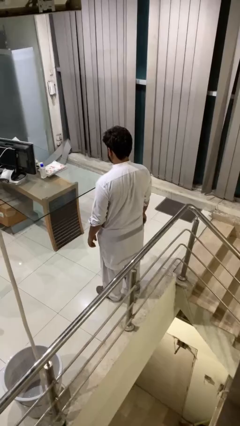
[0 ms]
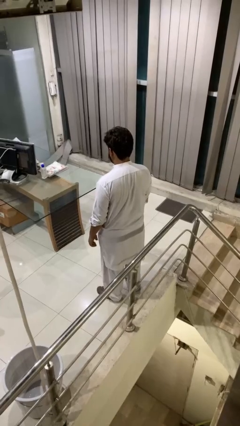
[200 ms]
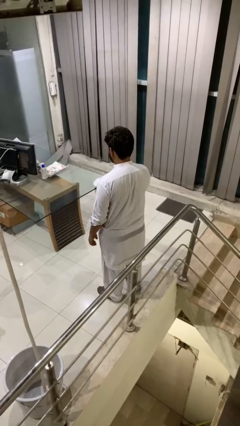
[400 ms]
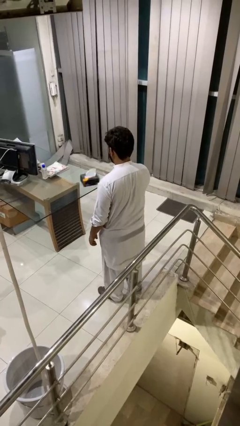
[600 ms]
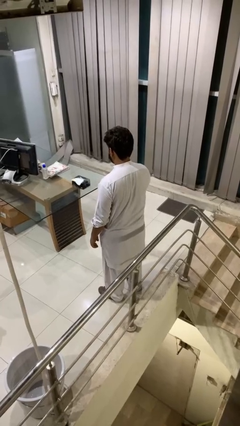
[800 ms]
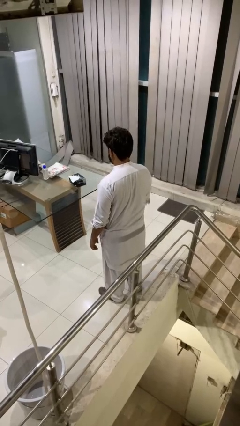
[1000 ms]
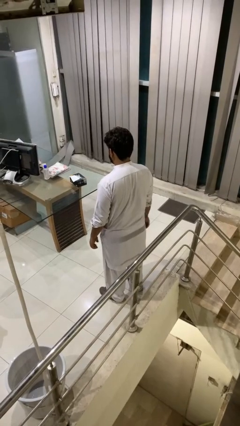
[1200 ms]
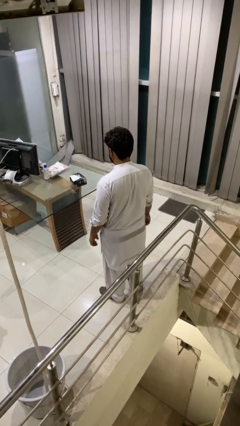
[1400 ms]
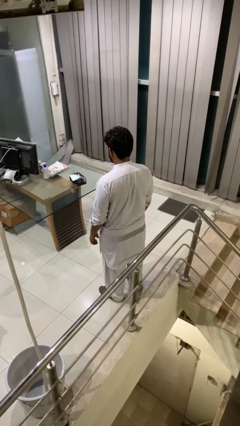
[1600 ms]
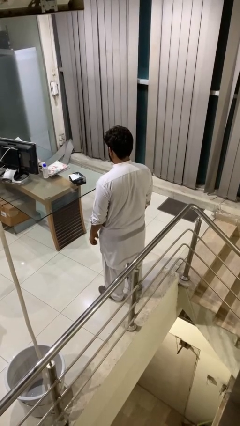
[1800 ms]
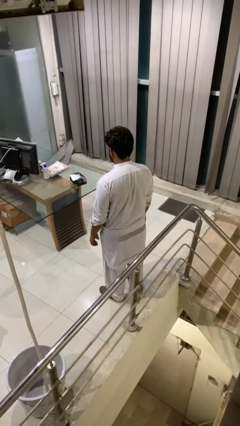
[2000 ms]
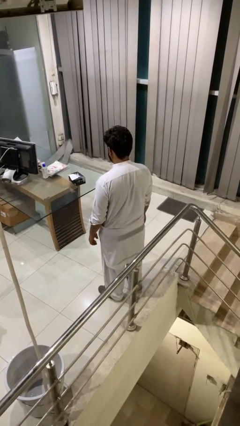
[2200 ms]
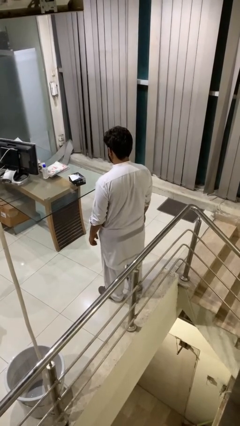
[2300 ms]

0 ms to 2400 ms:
person throws object on table

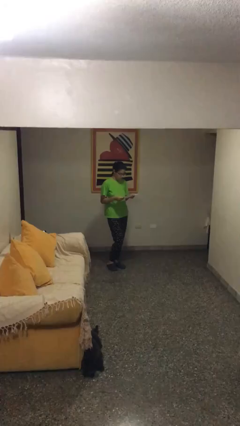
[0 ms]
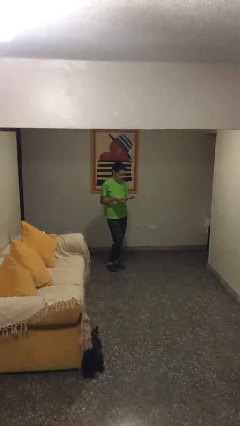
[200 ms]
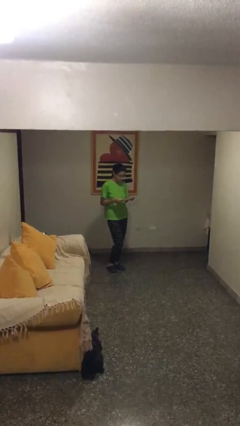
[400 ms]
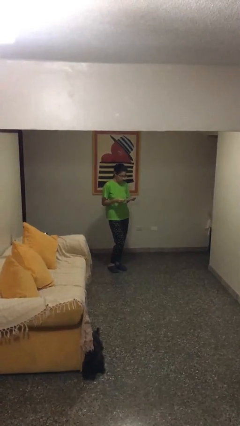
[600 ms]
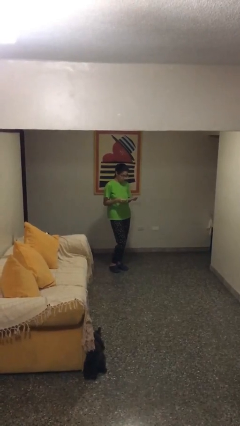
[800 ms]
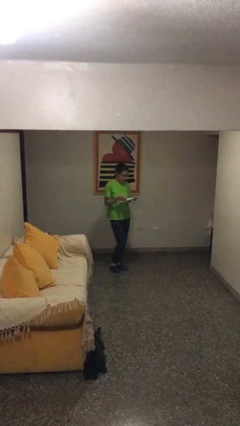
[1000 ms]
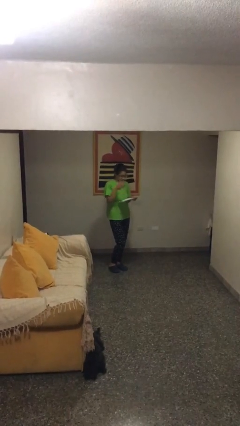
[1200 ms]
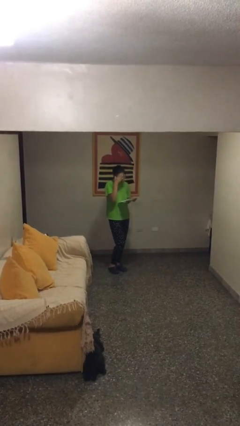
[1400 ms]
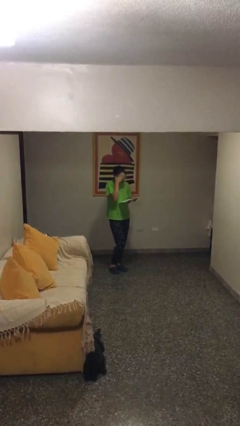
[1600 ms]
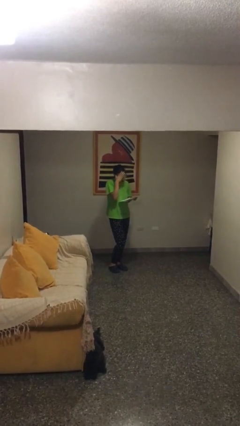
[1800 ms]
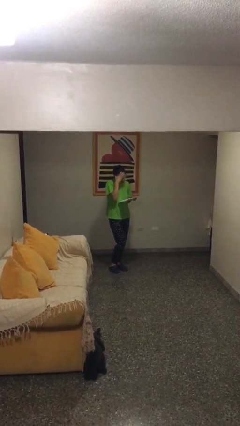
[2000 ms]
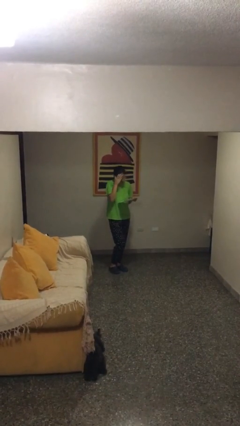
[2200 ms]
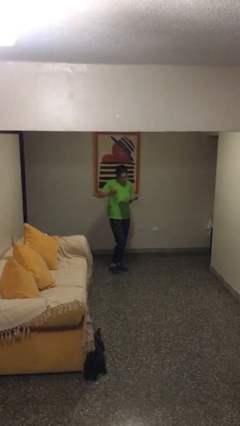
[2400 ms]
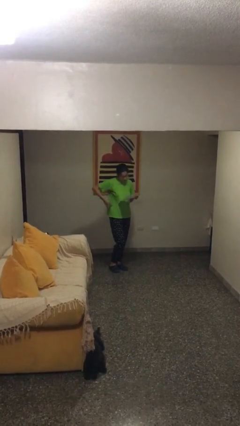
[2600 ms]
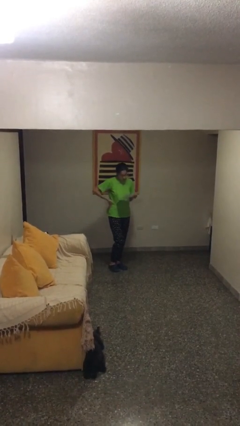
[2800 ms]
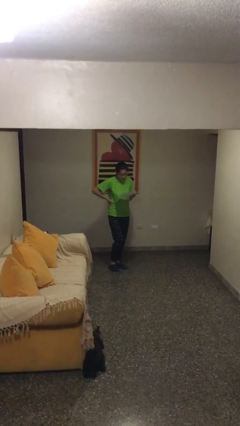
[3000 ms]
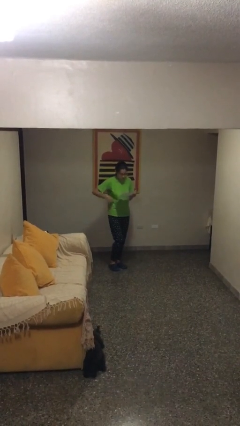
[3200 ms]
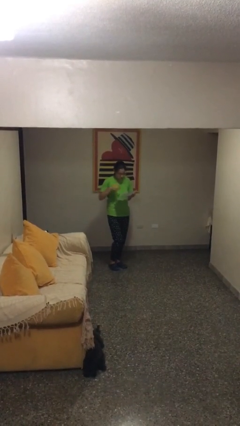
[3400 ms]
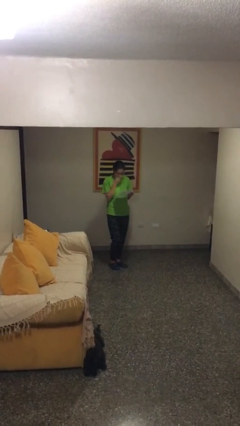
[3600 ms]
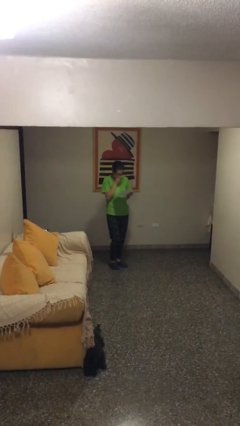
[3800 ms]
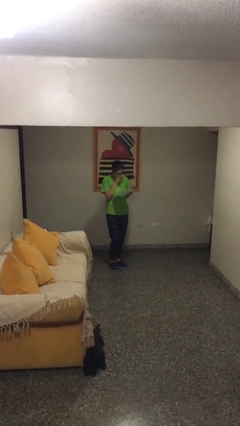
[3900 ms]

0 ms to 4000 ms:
person reads document

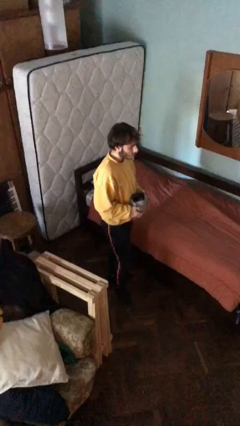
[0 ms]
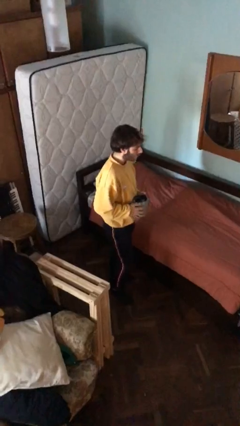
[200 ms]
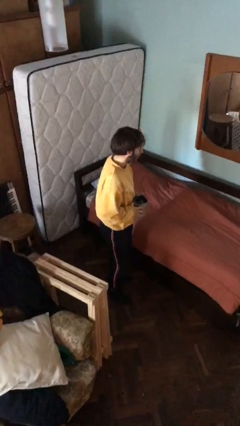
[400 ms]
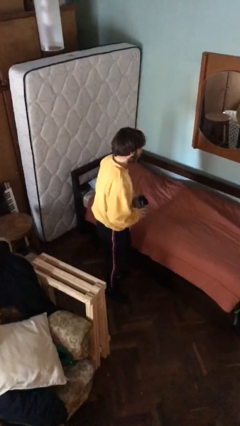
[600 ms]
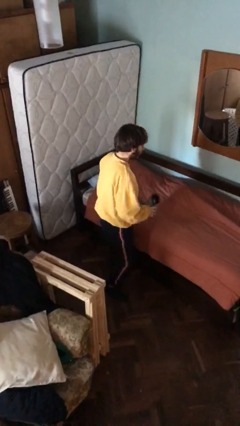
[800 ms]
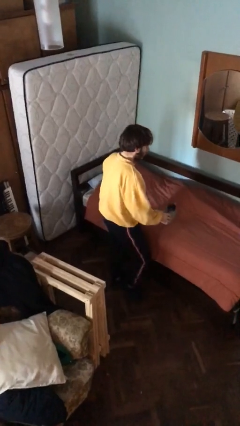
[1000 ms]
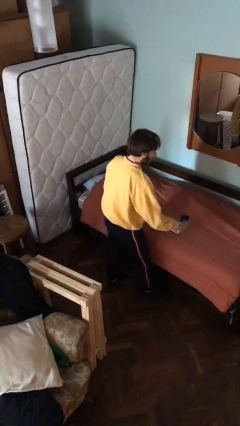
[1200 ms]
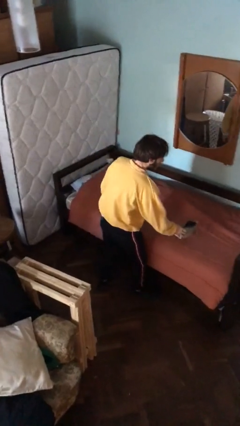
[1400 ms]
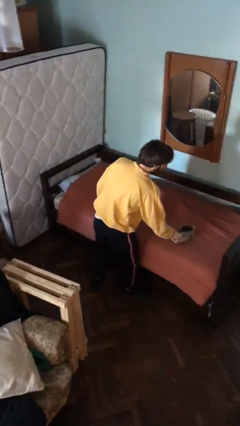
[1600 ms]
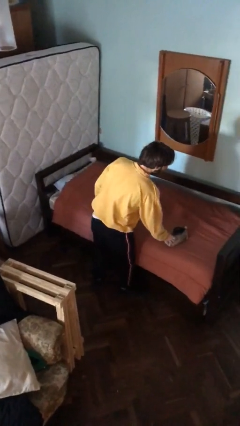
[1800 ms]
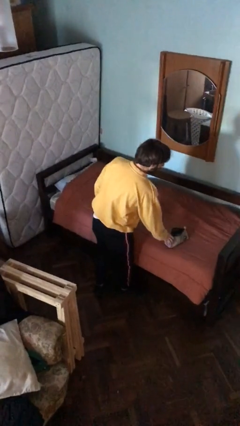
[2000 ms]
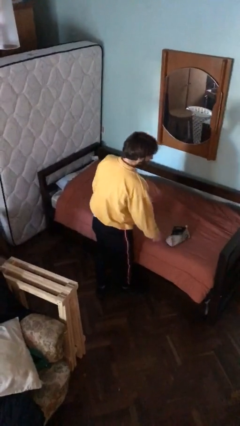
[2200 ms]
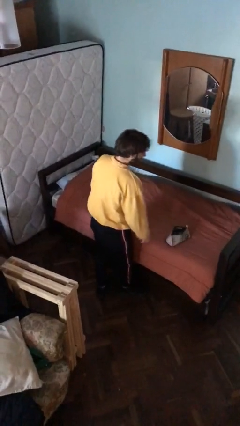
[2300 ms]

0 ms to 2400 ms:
person puts down object on bed

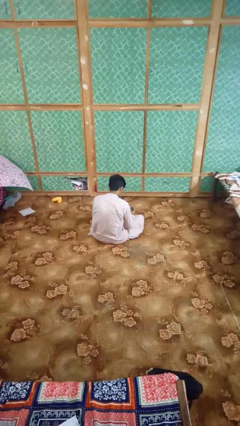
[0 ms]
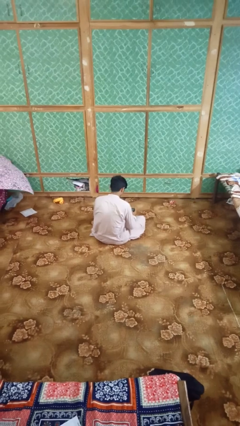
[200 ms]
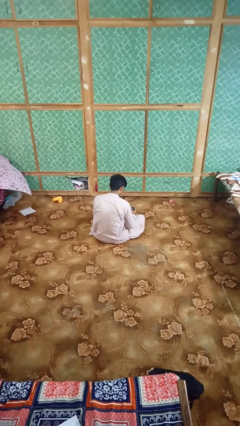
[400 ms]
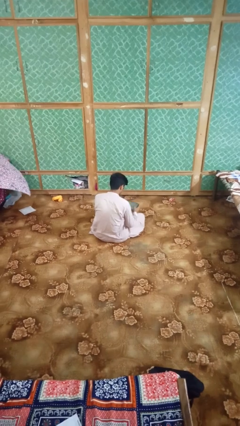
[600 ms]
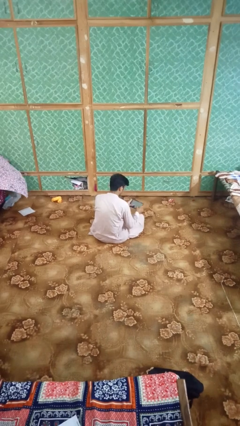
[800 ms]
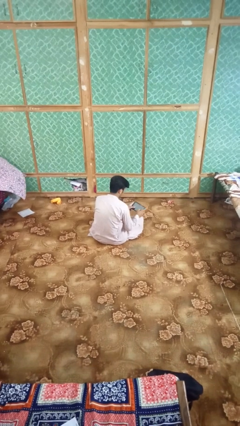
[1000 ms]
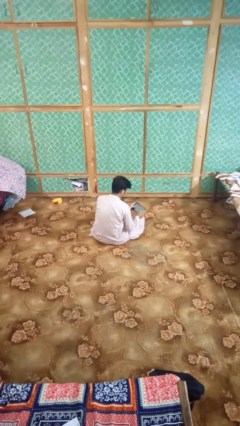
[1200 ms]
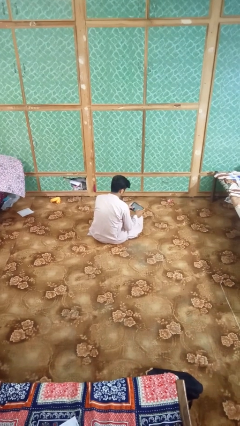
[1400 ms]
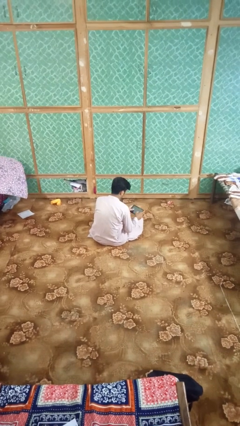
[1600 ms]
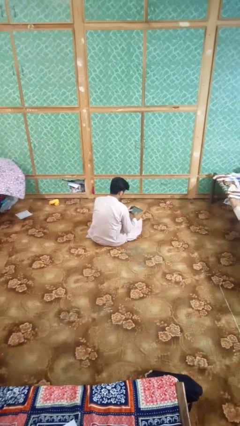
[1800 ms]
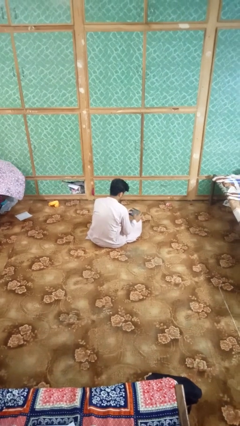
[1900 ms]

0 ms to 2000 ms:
person interacts with tablet

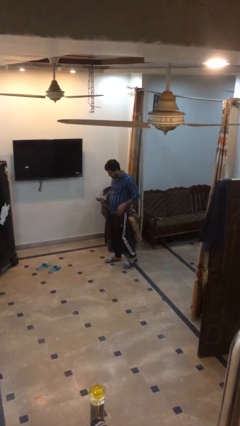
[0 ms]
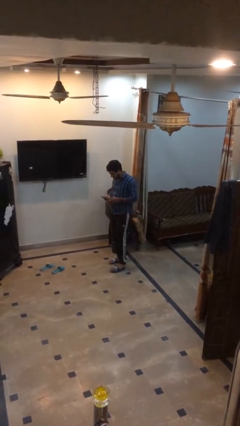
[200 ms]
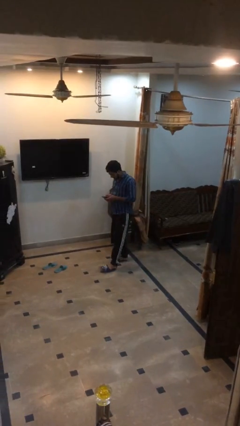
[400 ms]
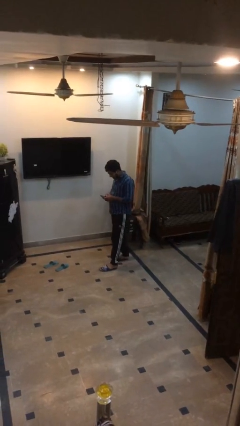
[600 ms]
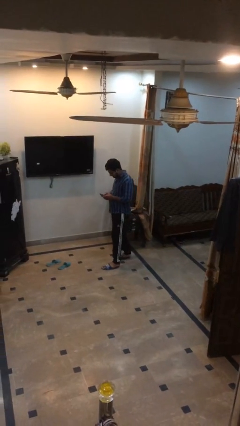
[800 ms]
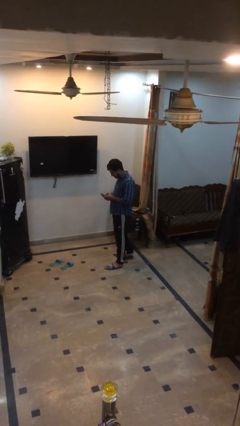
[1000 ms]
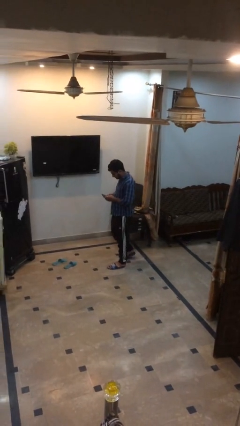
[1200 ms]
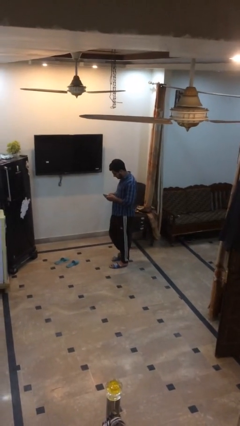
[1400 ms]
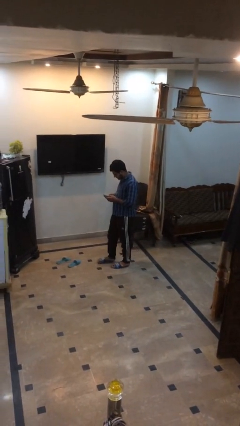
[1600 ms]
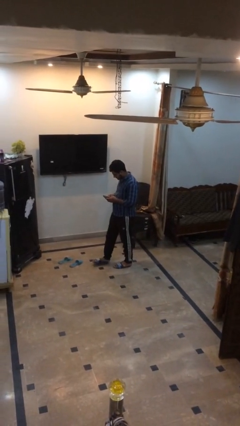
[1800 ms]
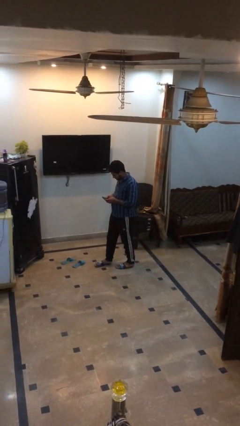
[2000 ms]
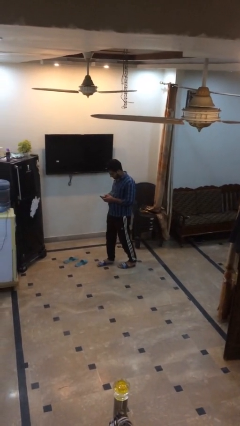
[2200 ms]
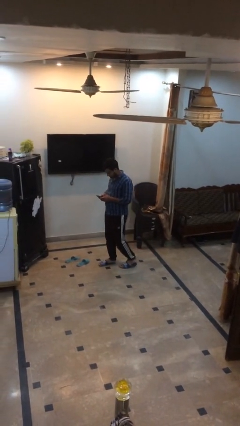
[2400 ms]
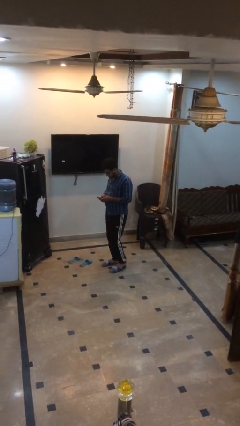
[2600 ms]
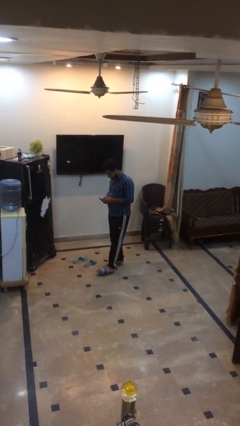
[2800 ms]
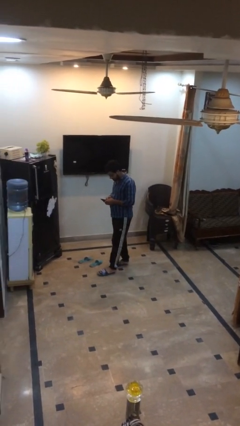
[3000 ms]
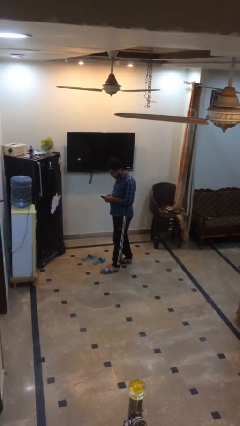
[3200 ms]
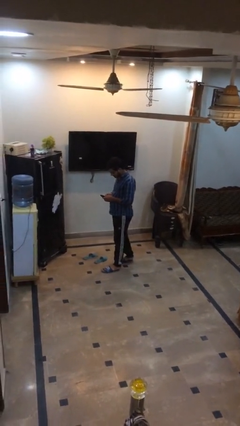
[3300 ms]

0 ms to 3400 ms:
person texts on phone

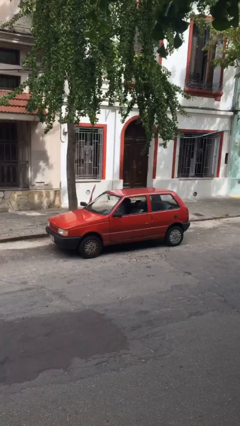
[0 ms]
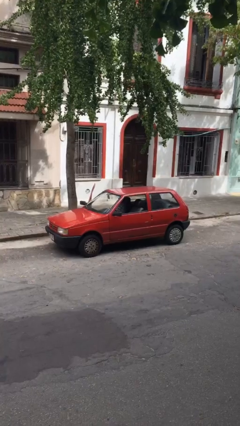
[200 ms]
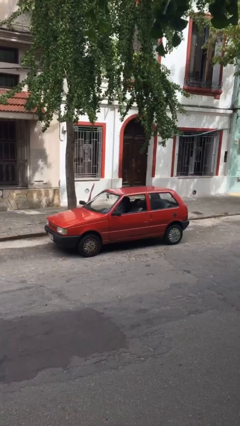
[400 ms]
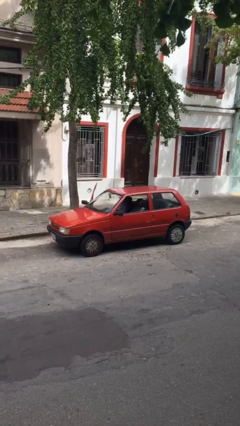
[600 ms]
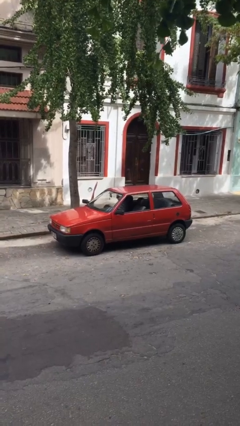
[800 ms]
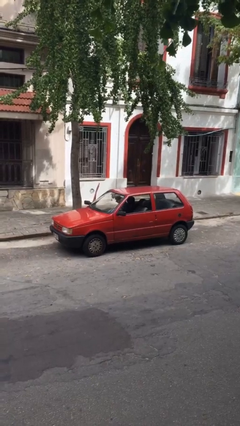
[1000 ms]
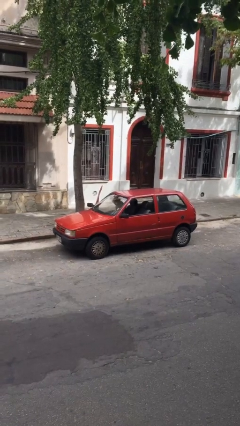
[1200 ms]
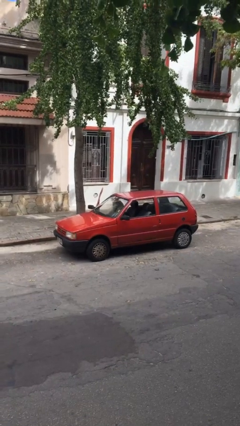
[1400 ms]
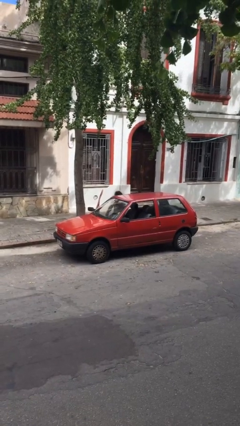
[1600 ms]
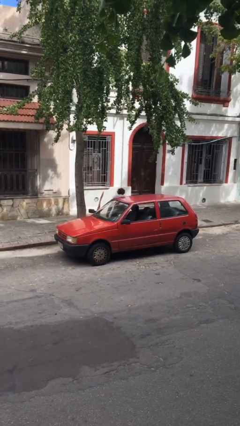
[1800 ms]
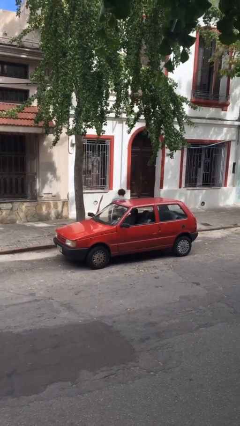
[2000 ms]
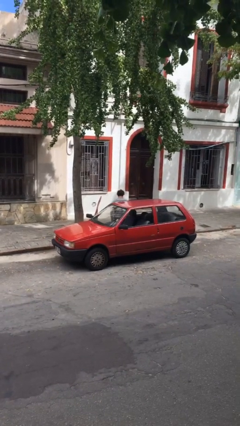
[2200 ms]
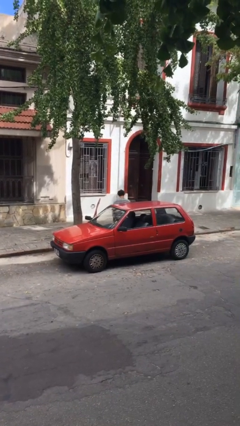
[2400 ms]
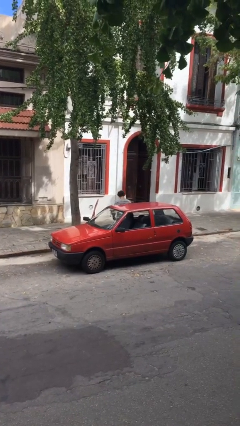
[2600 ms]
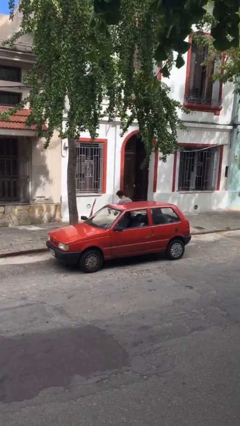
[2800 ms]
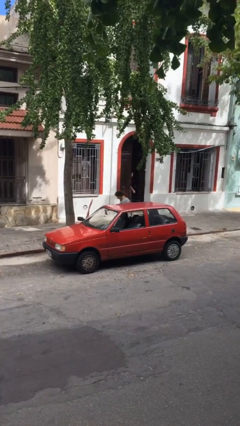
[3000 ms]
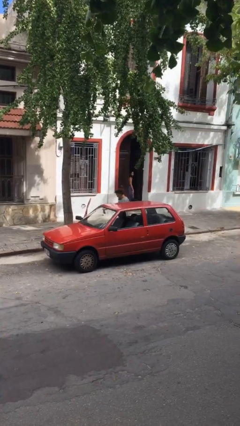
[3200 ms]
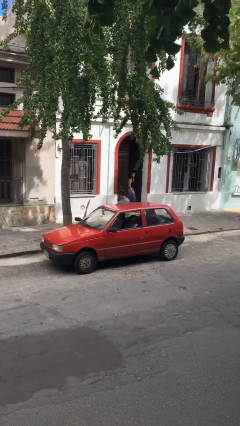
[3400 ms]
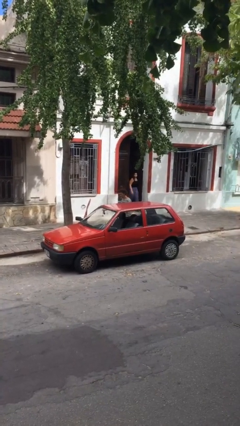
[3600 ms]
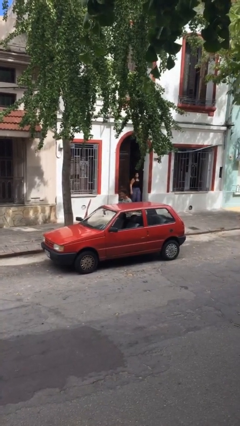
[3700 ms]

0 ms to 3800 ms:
person exits car
